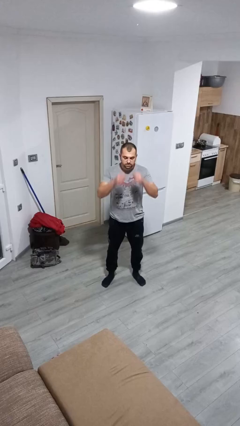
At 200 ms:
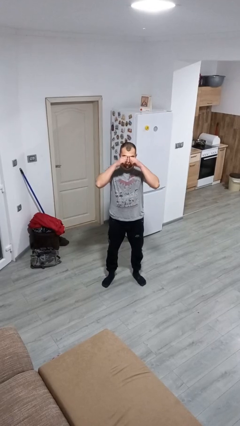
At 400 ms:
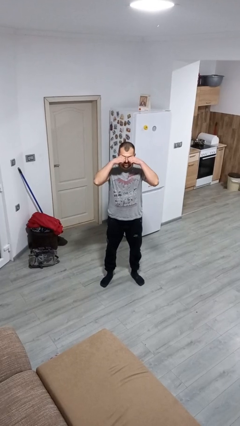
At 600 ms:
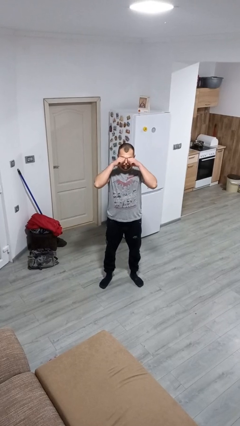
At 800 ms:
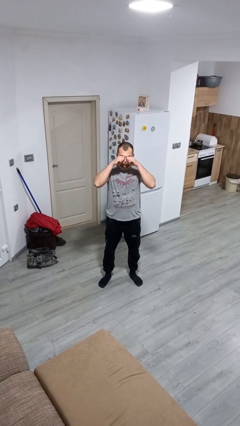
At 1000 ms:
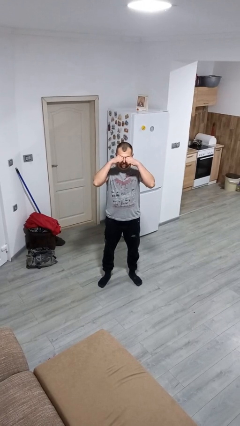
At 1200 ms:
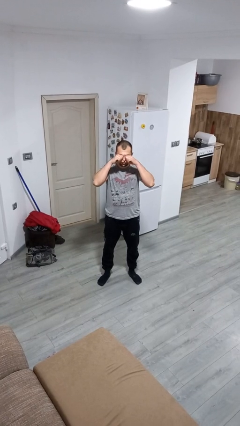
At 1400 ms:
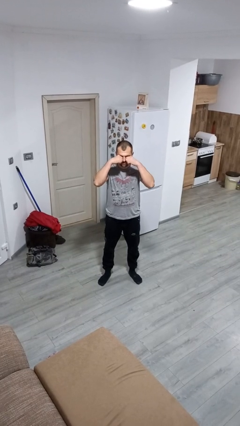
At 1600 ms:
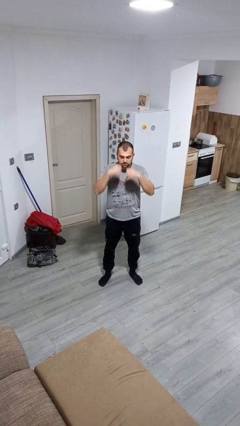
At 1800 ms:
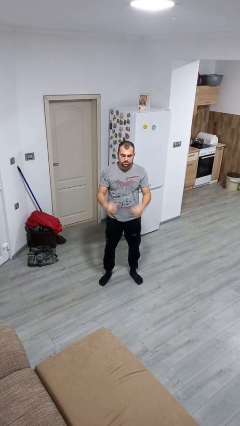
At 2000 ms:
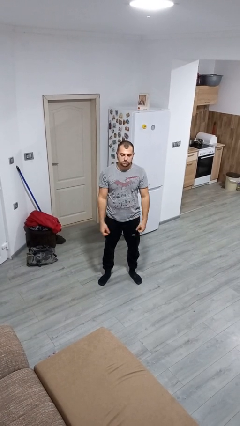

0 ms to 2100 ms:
person rubs eyes

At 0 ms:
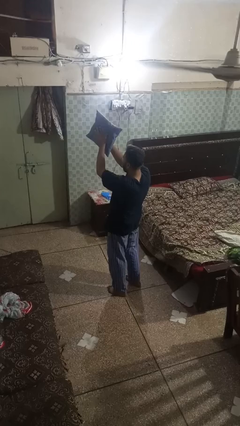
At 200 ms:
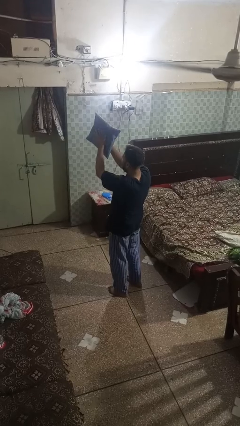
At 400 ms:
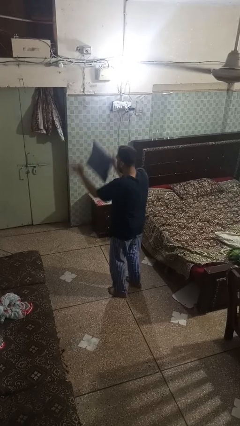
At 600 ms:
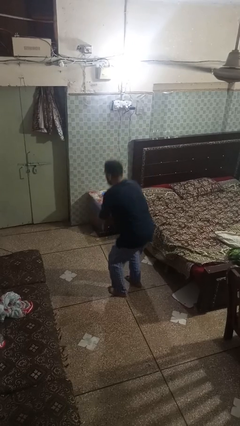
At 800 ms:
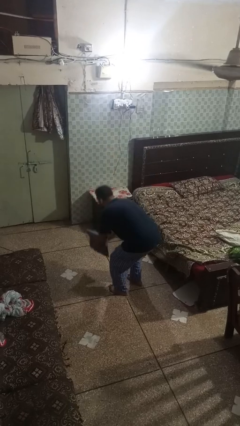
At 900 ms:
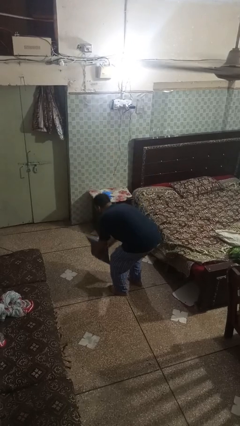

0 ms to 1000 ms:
person drops object

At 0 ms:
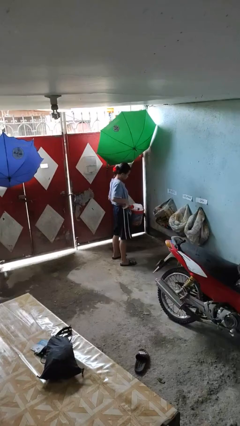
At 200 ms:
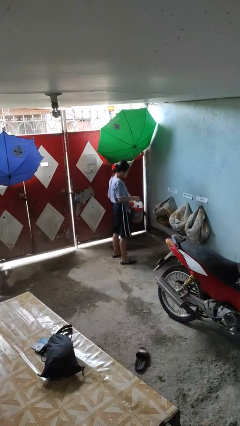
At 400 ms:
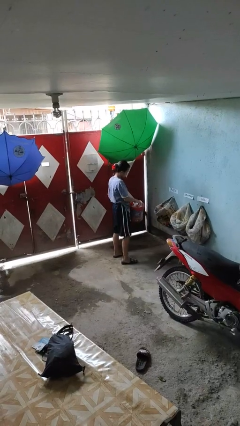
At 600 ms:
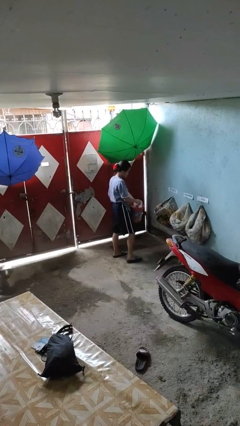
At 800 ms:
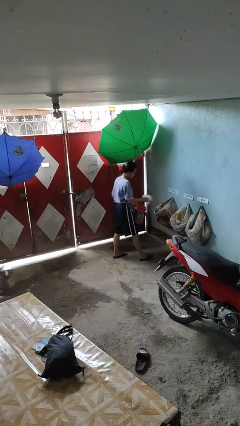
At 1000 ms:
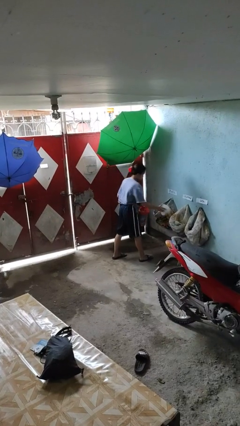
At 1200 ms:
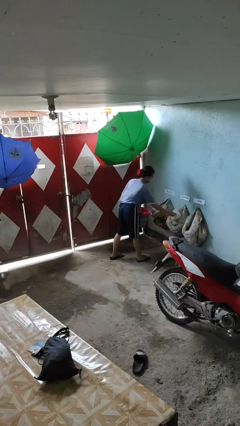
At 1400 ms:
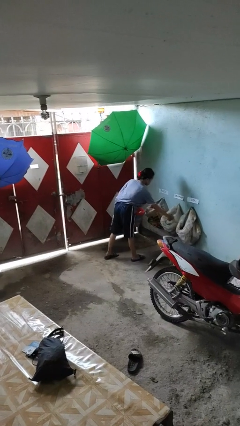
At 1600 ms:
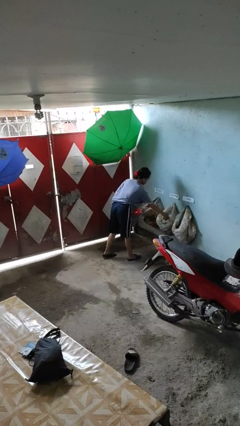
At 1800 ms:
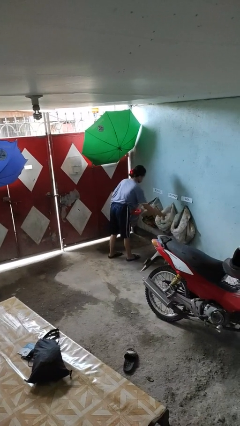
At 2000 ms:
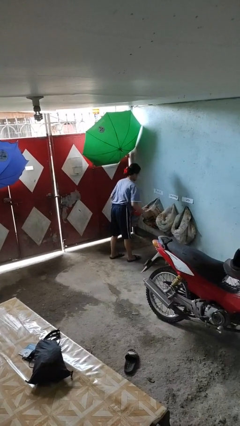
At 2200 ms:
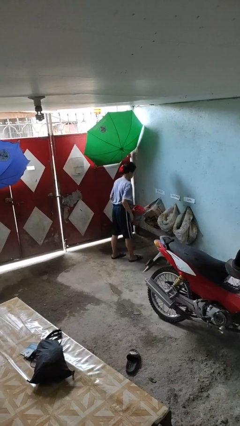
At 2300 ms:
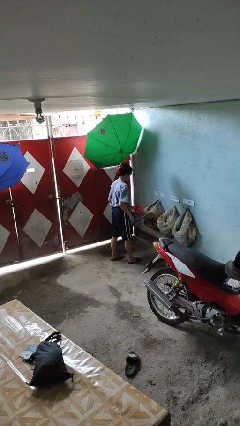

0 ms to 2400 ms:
person discards trash

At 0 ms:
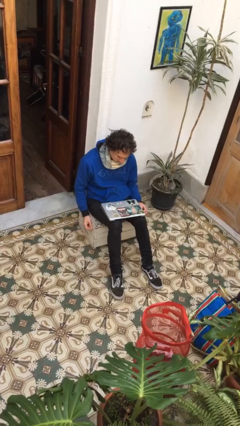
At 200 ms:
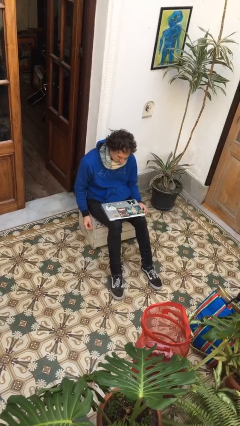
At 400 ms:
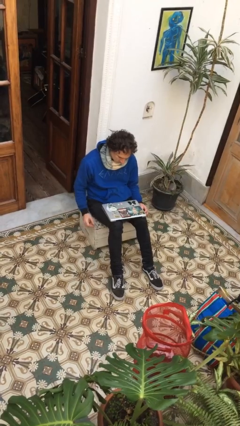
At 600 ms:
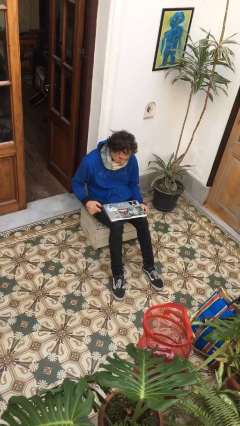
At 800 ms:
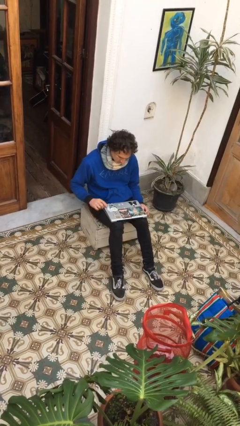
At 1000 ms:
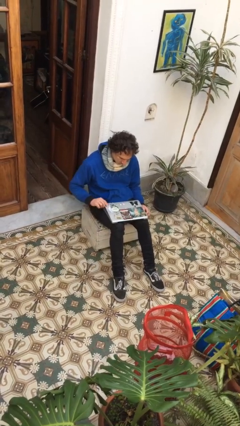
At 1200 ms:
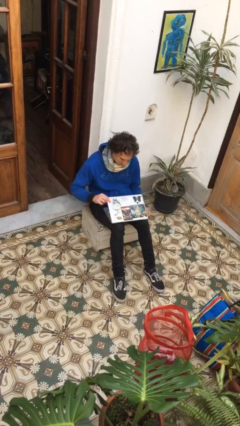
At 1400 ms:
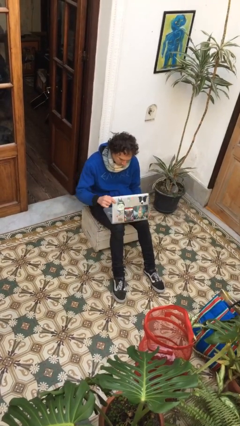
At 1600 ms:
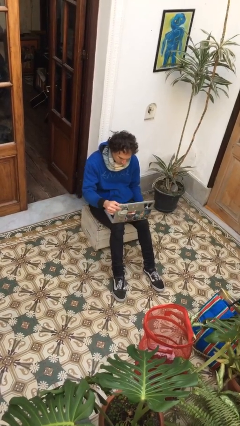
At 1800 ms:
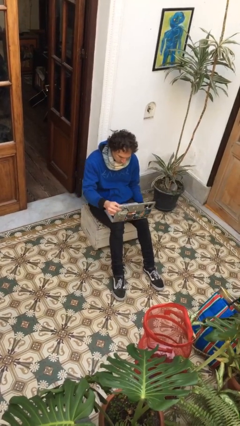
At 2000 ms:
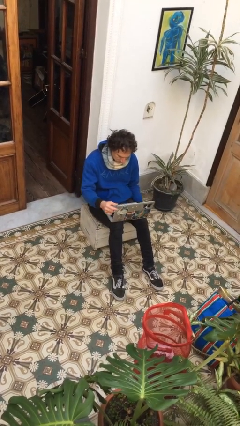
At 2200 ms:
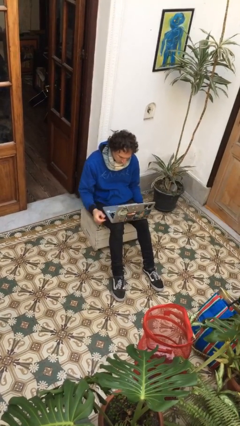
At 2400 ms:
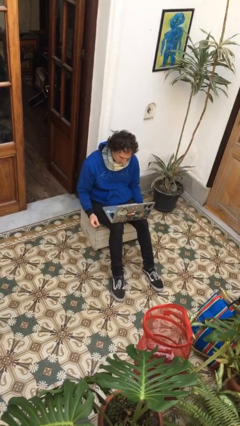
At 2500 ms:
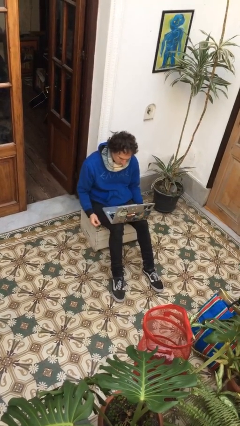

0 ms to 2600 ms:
person opens laptop

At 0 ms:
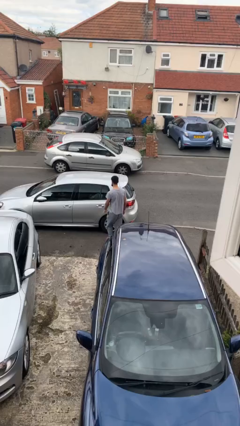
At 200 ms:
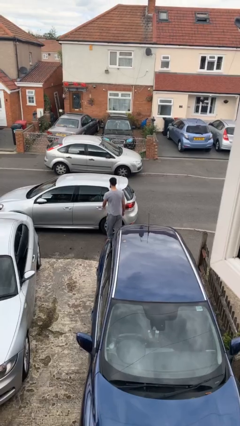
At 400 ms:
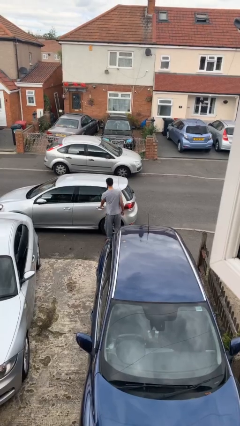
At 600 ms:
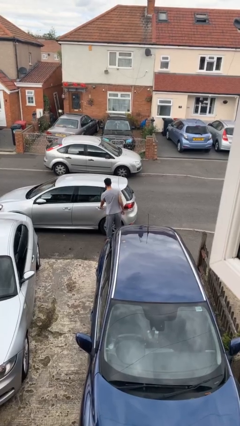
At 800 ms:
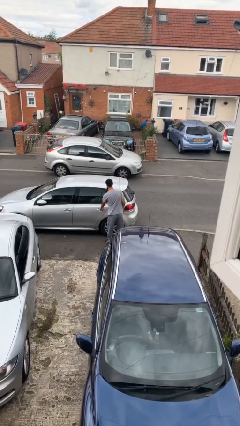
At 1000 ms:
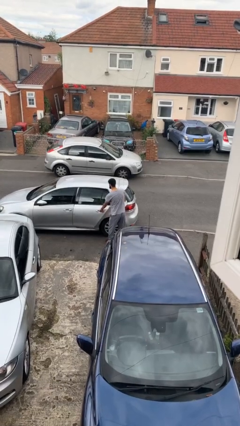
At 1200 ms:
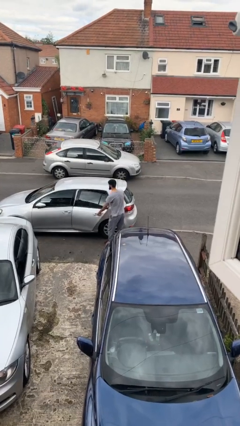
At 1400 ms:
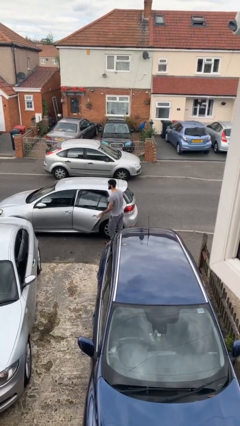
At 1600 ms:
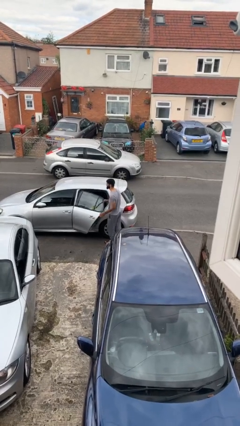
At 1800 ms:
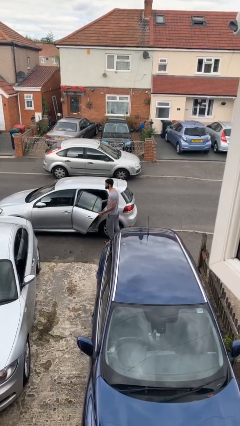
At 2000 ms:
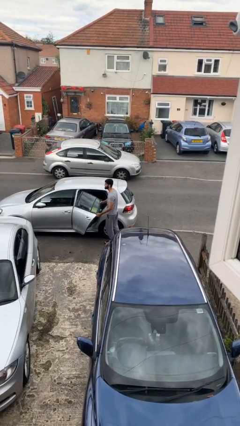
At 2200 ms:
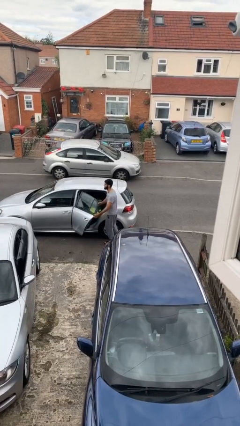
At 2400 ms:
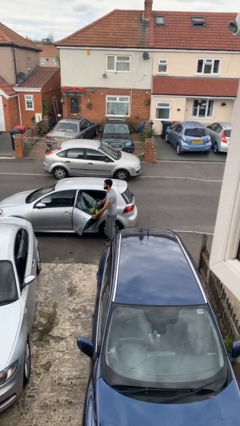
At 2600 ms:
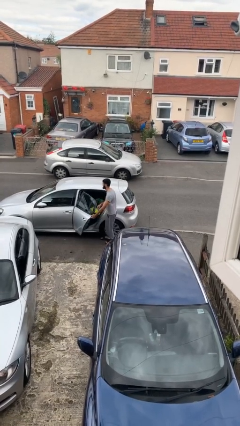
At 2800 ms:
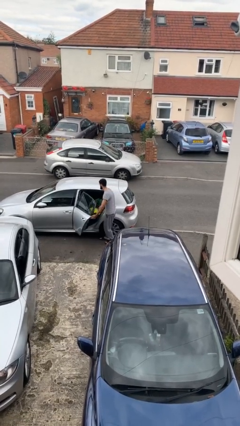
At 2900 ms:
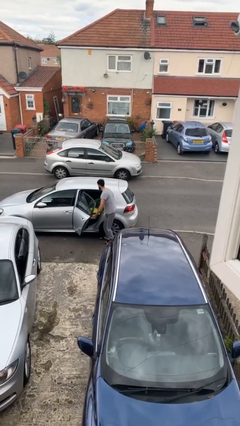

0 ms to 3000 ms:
person opens car door

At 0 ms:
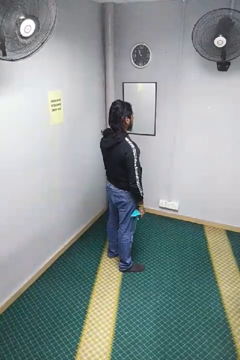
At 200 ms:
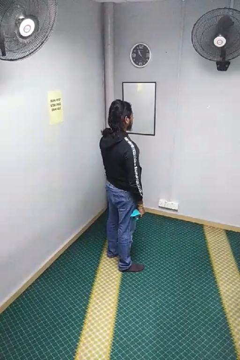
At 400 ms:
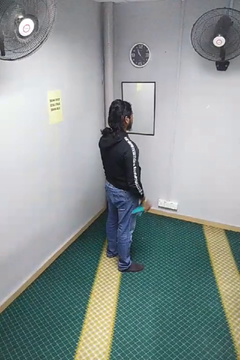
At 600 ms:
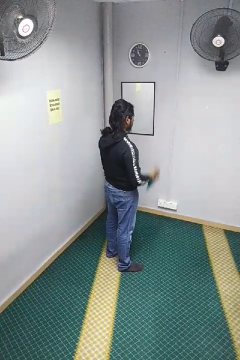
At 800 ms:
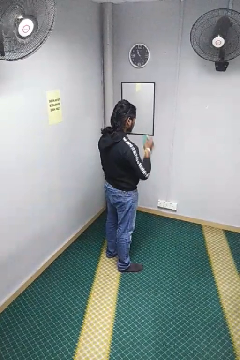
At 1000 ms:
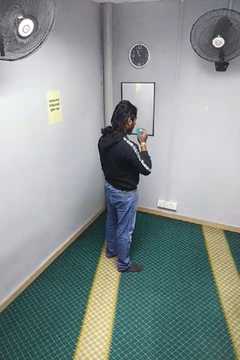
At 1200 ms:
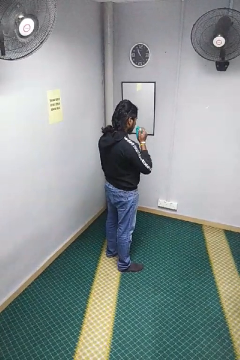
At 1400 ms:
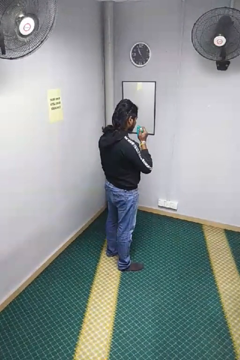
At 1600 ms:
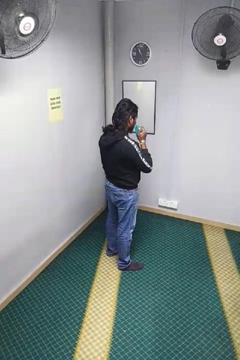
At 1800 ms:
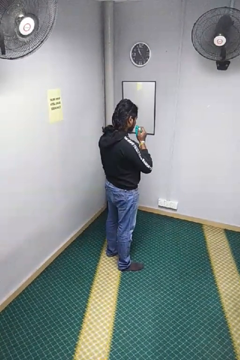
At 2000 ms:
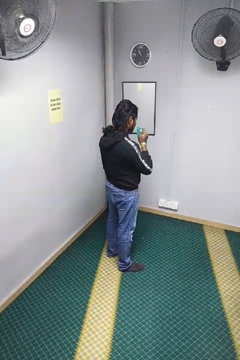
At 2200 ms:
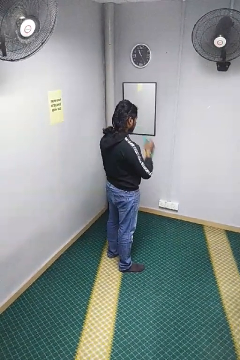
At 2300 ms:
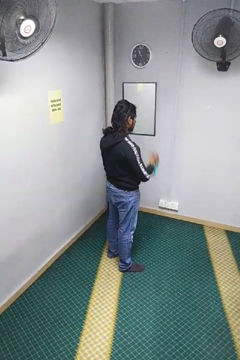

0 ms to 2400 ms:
person wipes mouth with napkin

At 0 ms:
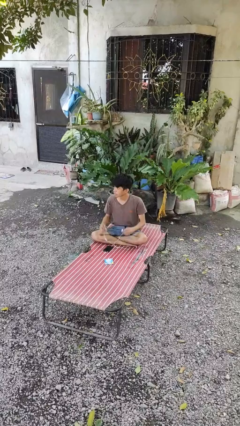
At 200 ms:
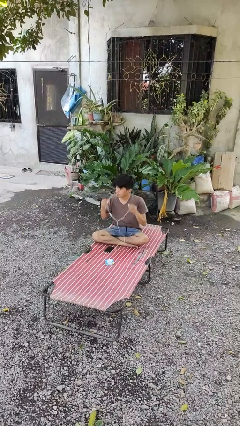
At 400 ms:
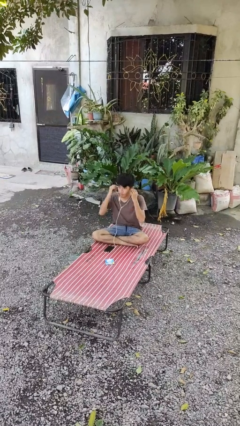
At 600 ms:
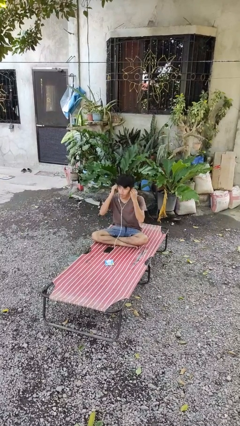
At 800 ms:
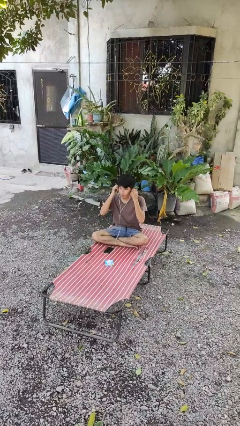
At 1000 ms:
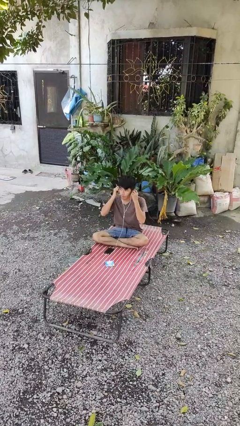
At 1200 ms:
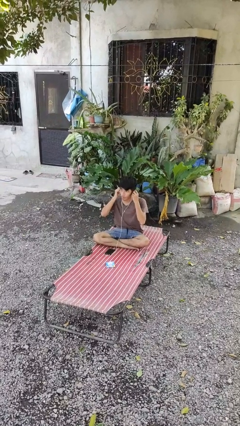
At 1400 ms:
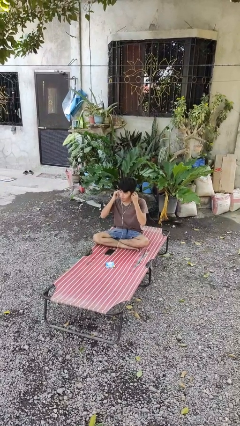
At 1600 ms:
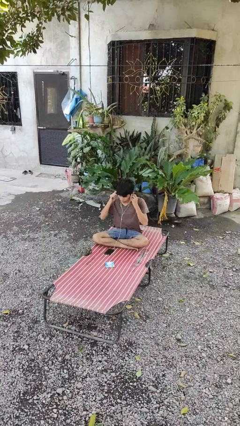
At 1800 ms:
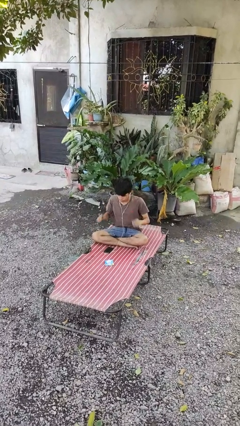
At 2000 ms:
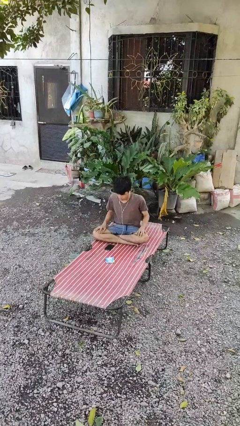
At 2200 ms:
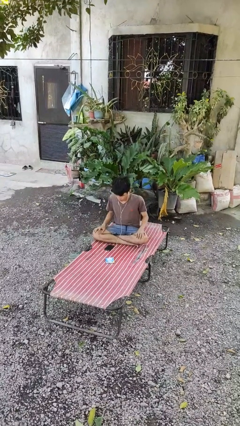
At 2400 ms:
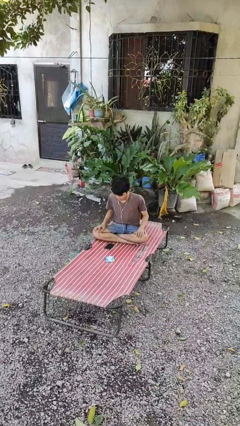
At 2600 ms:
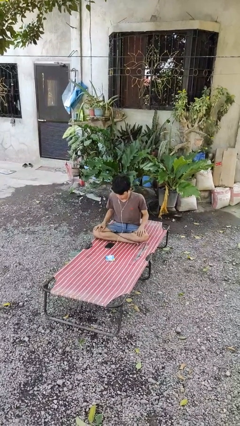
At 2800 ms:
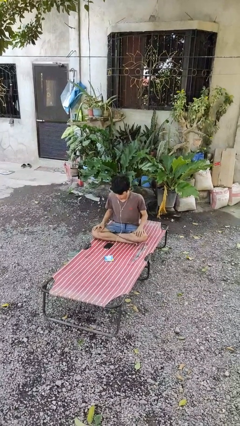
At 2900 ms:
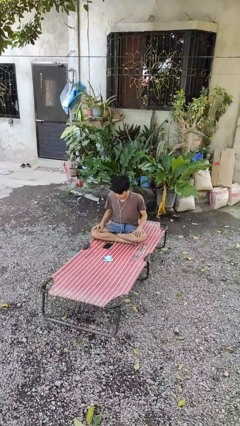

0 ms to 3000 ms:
person puts on headphones

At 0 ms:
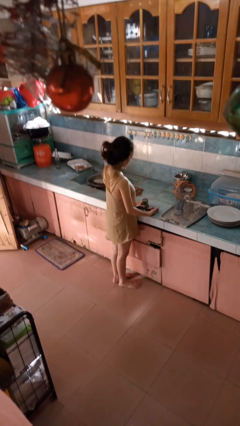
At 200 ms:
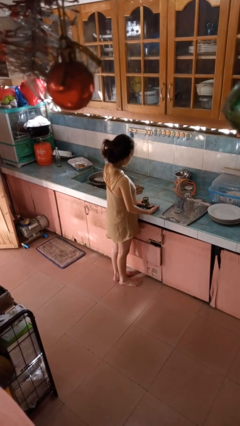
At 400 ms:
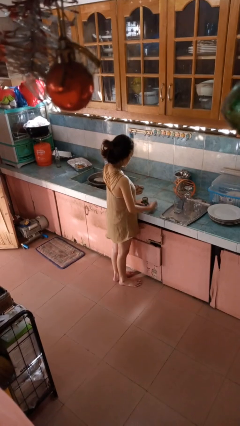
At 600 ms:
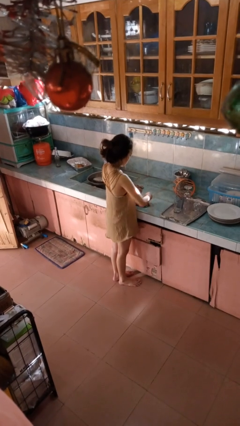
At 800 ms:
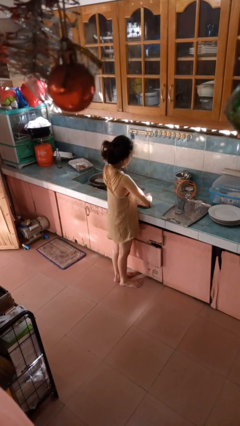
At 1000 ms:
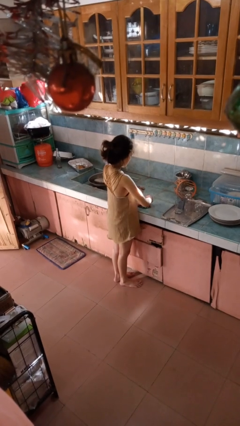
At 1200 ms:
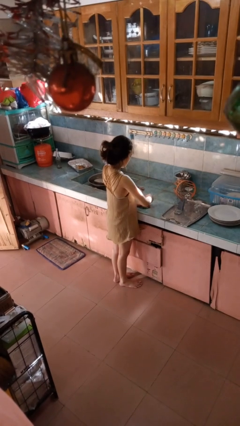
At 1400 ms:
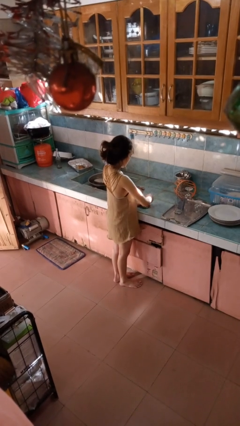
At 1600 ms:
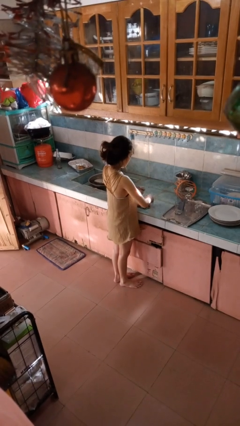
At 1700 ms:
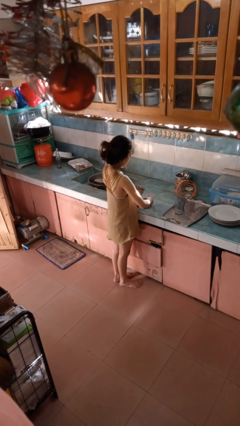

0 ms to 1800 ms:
person opens can with can opener
